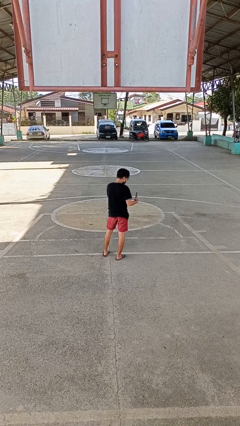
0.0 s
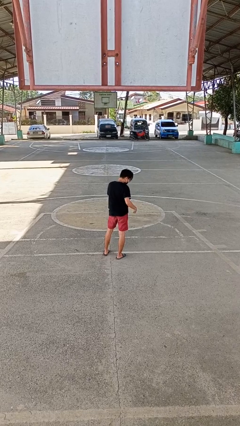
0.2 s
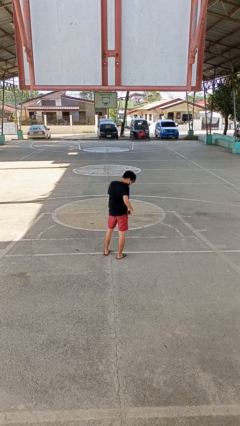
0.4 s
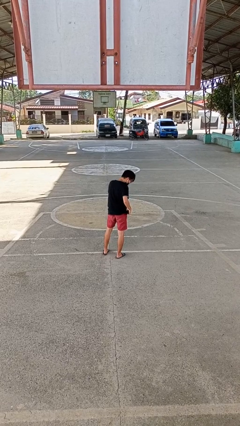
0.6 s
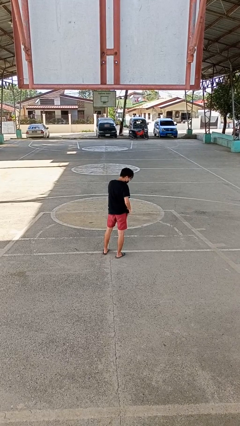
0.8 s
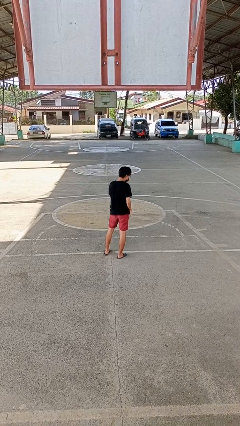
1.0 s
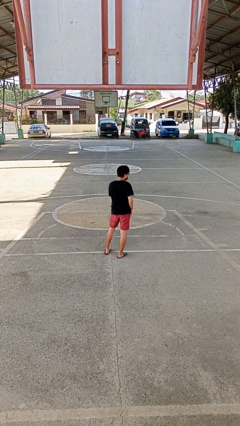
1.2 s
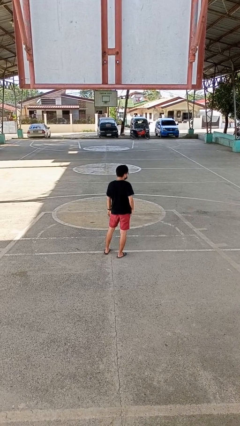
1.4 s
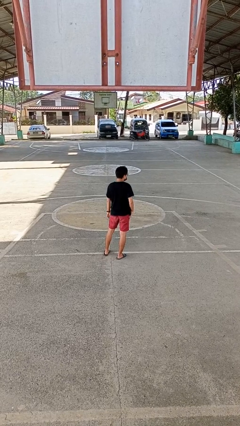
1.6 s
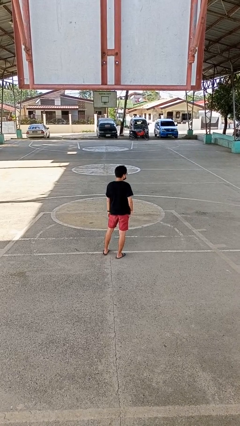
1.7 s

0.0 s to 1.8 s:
person puts phone into pocket

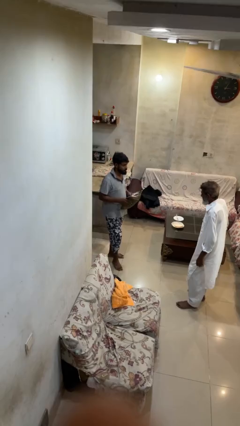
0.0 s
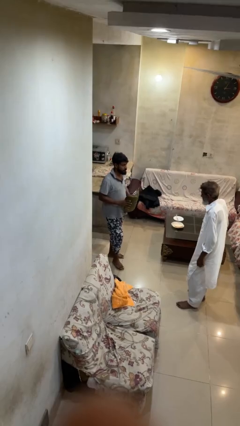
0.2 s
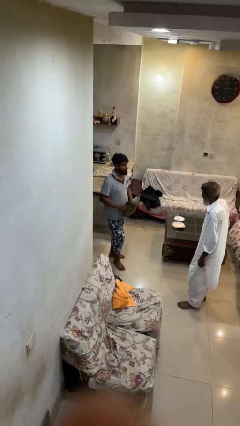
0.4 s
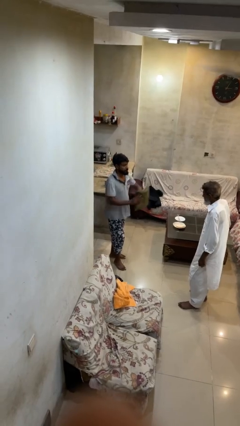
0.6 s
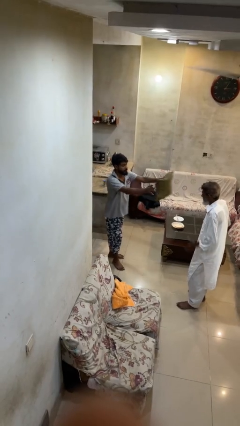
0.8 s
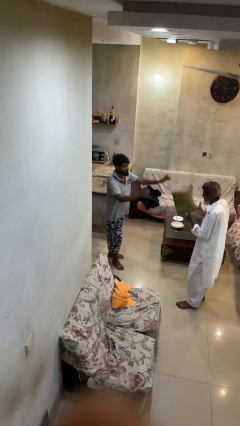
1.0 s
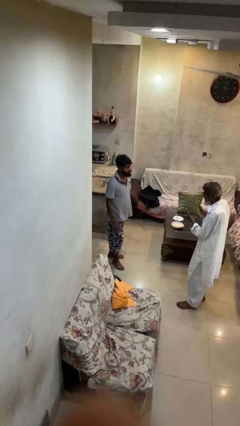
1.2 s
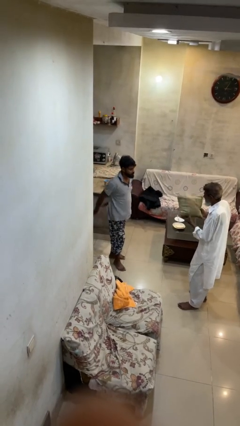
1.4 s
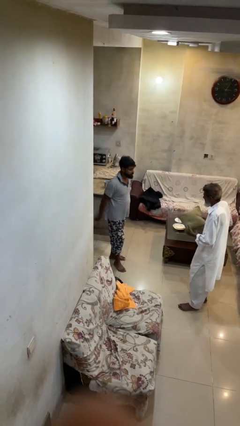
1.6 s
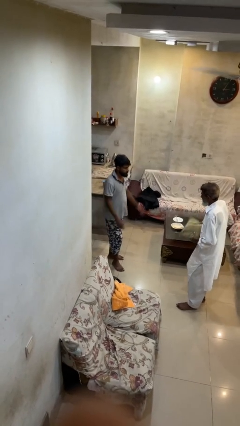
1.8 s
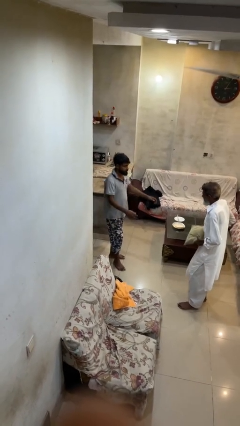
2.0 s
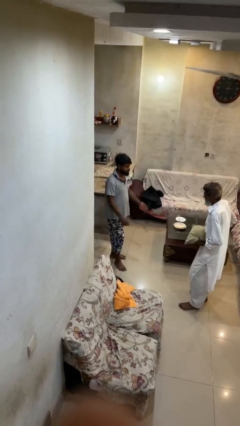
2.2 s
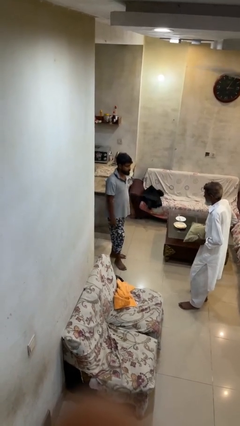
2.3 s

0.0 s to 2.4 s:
person throws object to person

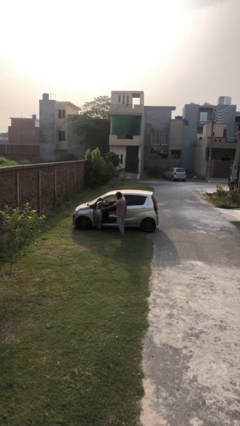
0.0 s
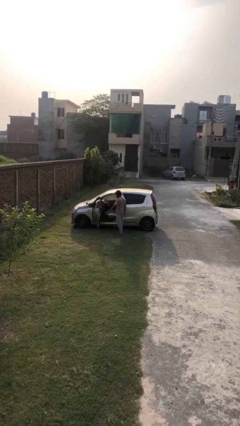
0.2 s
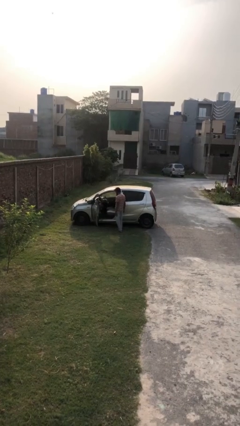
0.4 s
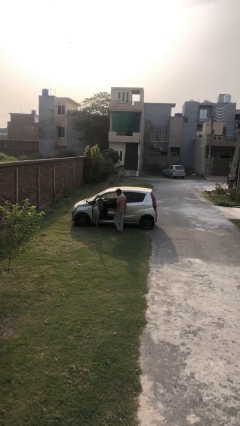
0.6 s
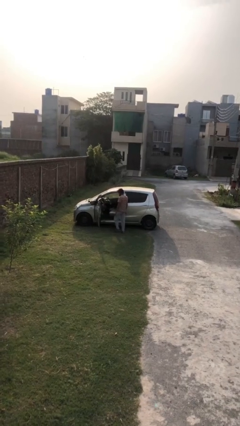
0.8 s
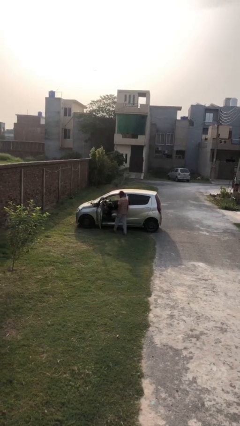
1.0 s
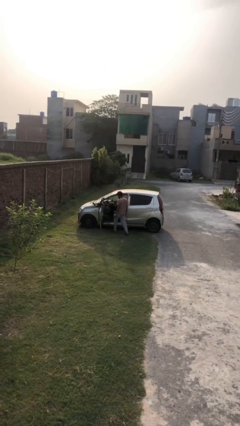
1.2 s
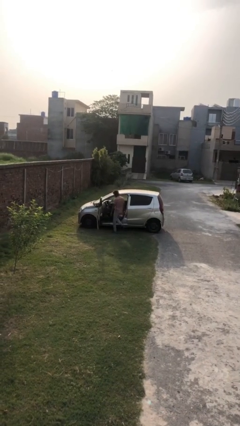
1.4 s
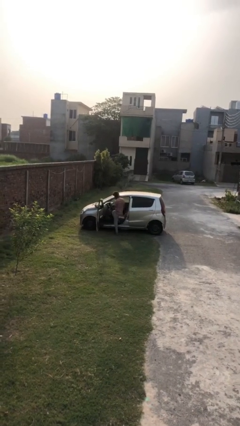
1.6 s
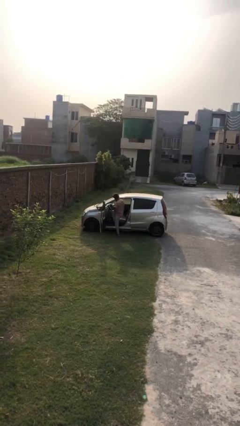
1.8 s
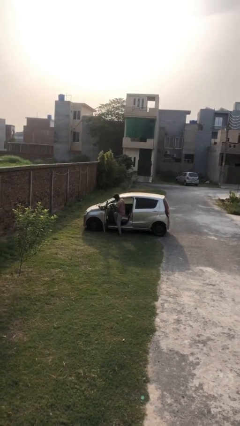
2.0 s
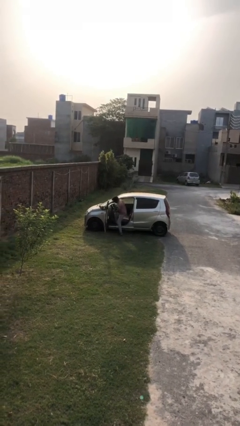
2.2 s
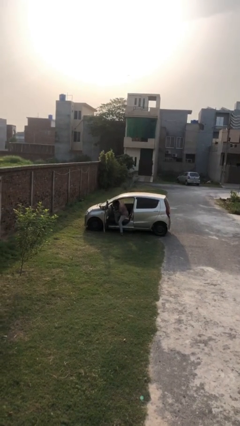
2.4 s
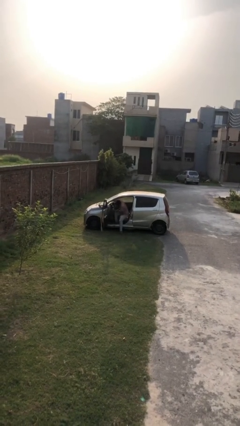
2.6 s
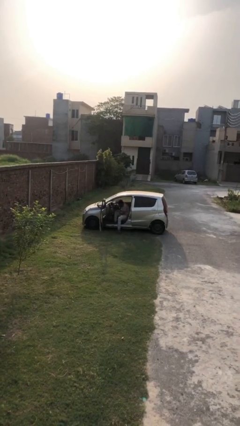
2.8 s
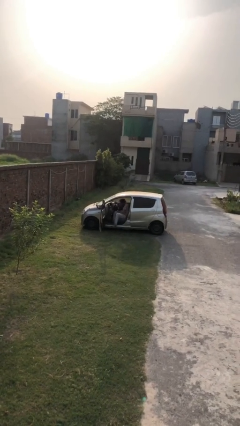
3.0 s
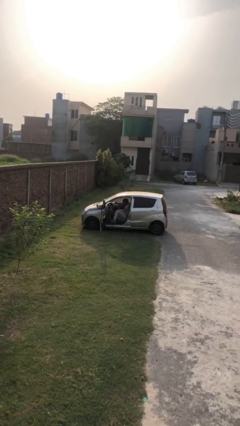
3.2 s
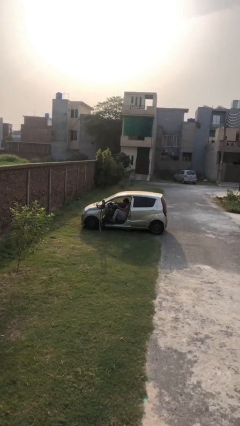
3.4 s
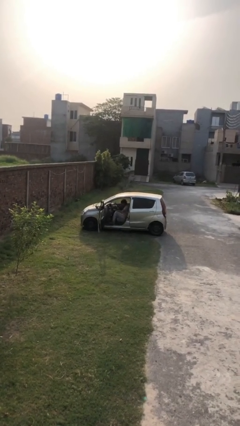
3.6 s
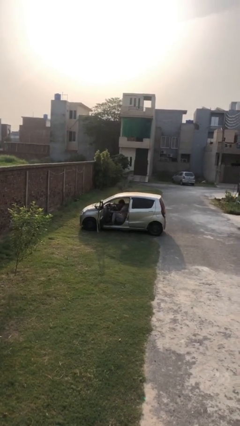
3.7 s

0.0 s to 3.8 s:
person enters car

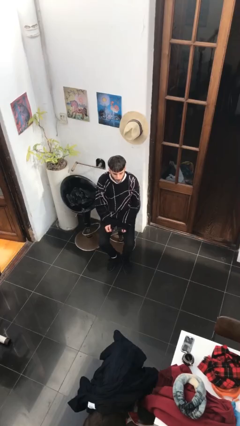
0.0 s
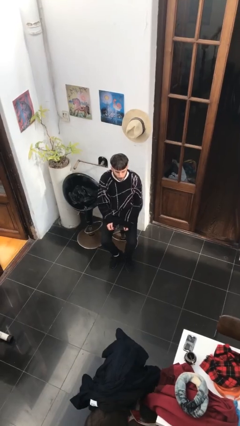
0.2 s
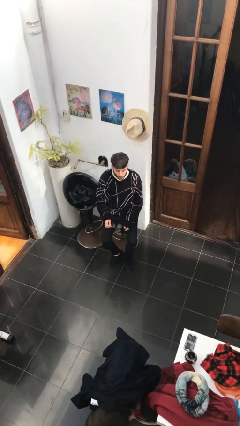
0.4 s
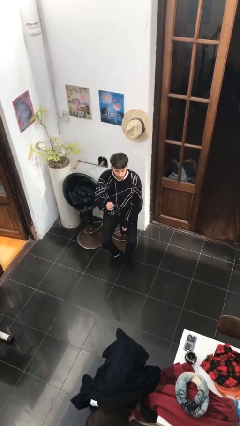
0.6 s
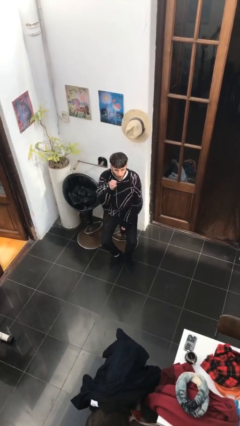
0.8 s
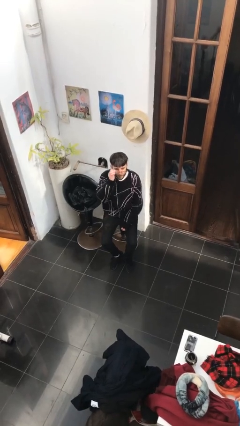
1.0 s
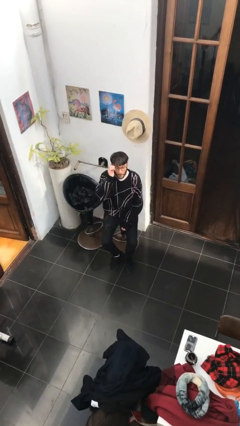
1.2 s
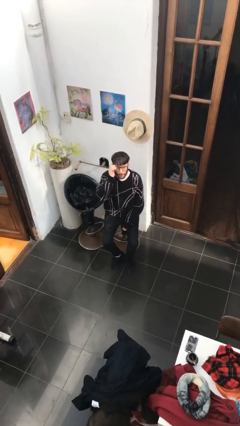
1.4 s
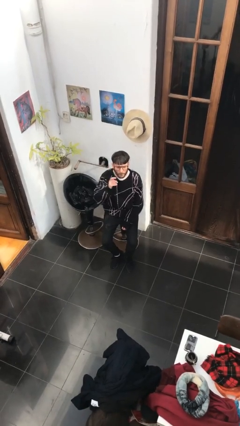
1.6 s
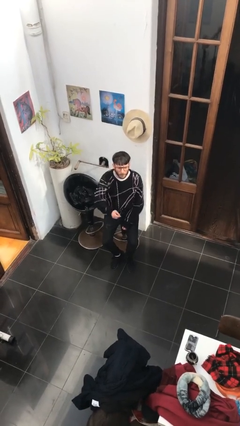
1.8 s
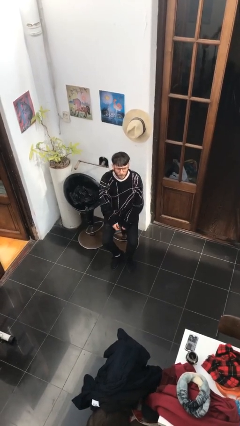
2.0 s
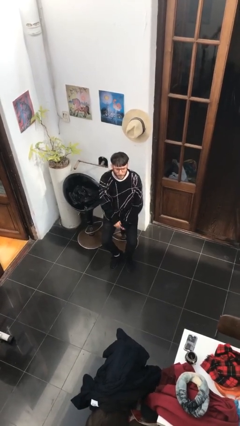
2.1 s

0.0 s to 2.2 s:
person puts on glasses

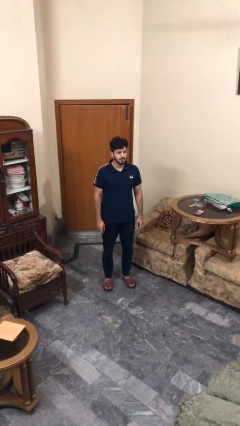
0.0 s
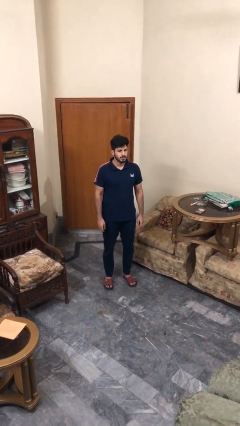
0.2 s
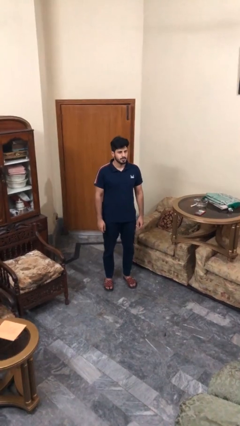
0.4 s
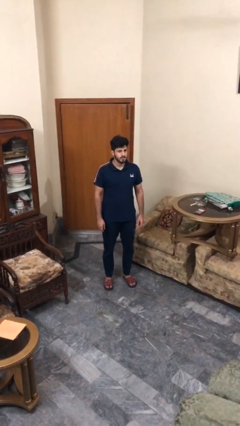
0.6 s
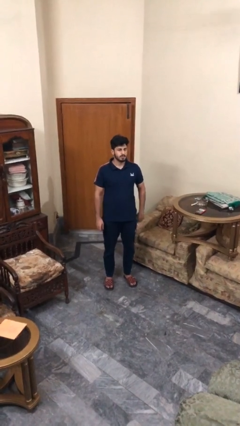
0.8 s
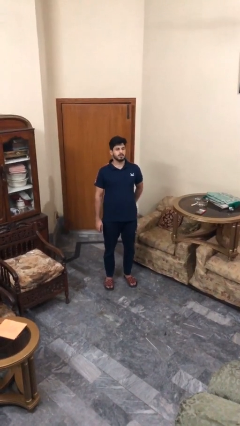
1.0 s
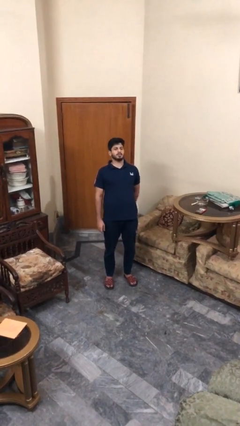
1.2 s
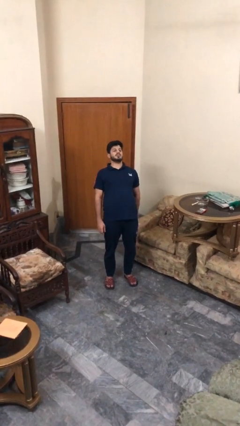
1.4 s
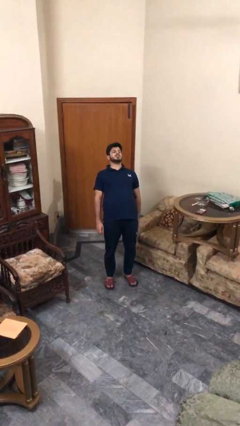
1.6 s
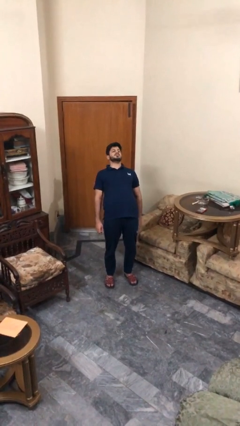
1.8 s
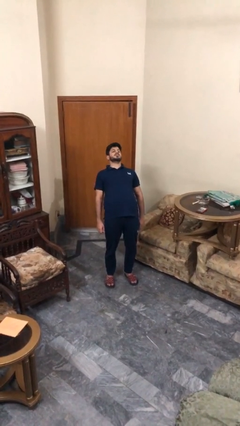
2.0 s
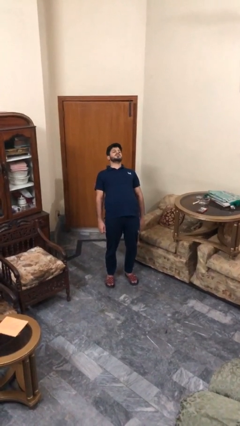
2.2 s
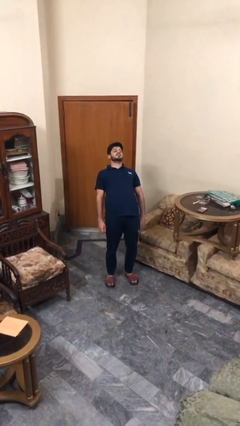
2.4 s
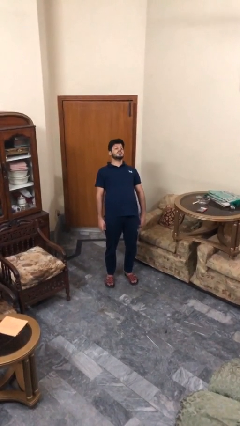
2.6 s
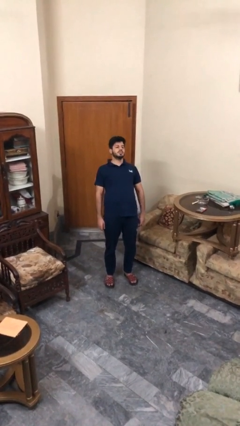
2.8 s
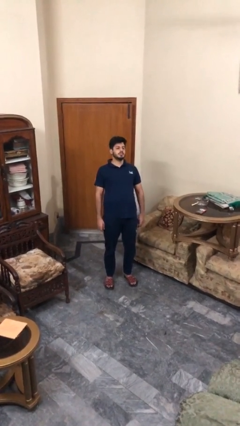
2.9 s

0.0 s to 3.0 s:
person stretches back

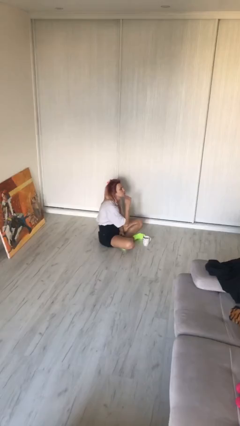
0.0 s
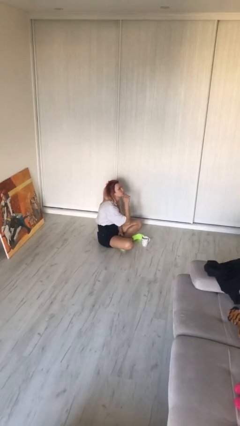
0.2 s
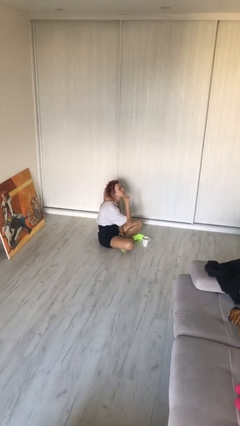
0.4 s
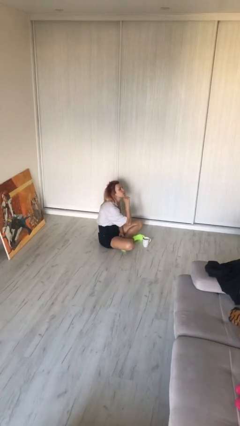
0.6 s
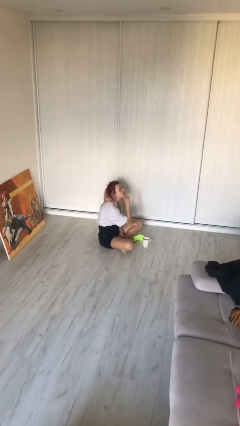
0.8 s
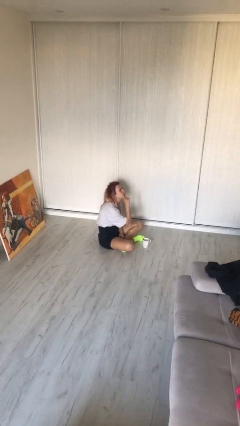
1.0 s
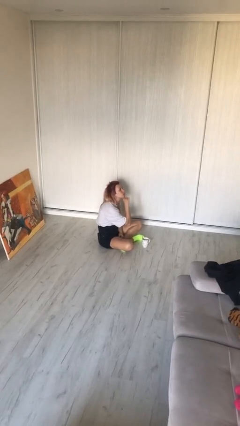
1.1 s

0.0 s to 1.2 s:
person strokes chin

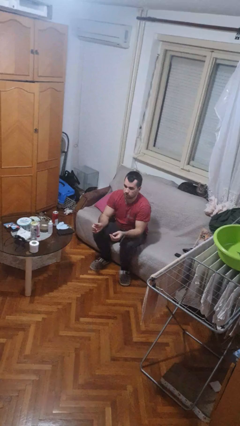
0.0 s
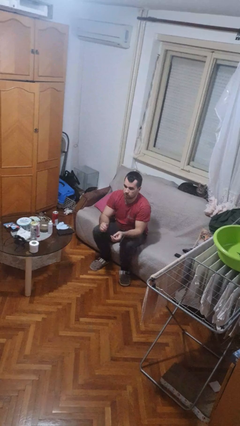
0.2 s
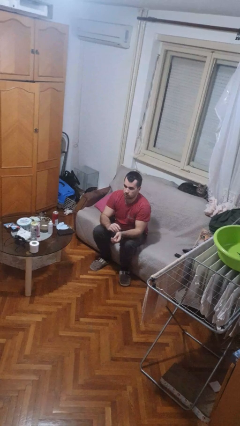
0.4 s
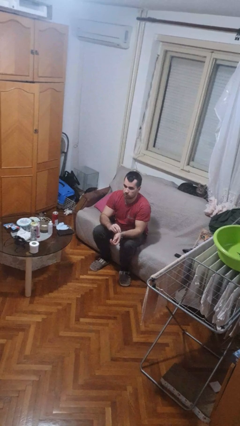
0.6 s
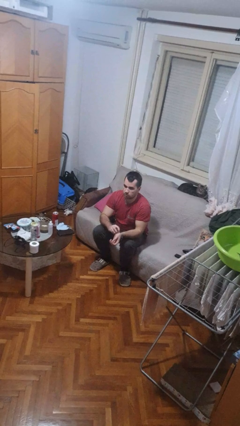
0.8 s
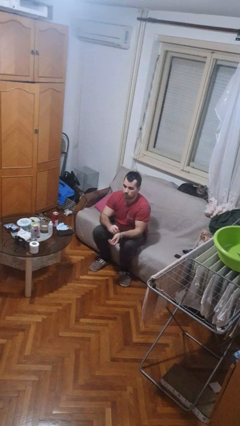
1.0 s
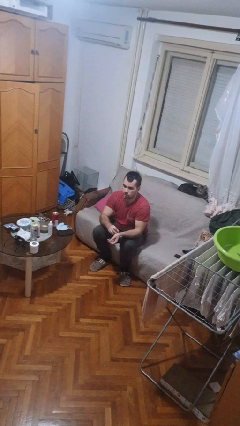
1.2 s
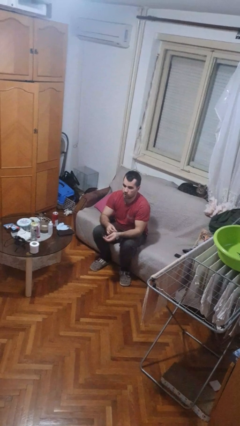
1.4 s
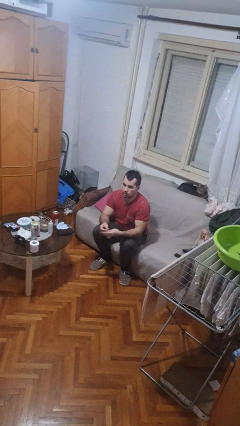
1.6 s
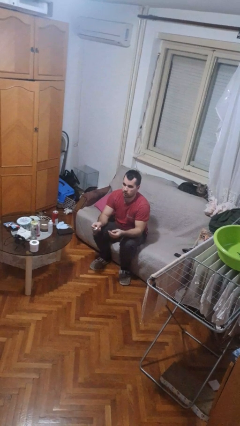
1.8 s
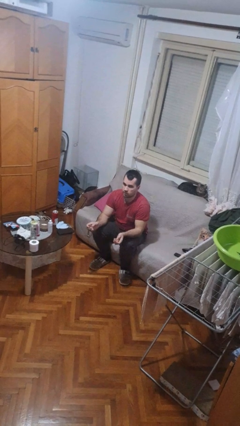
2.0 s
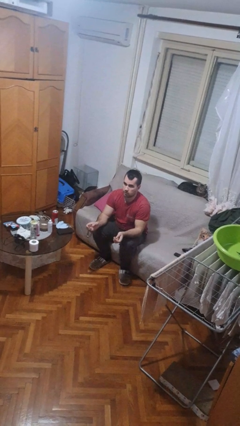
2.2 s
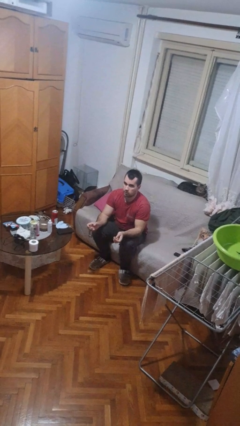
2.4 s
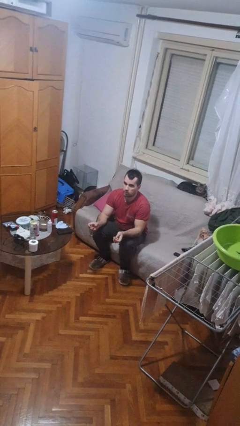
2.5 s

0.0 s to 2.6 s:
person takes off wristwatch

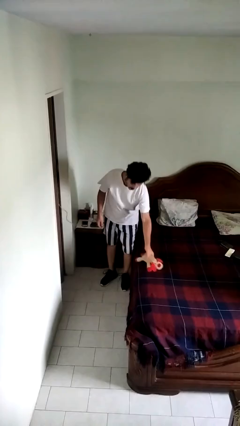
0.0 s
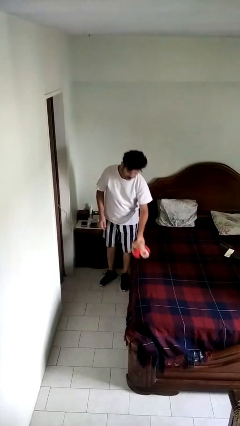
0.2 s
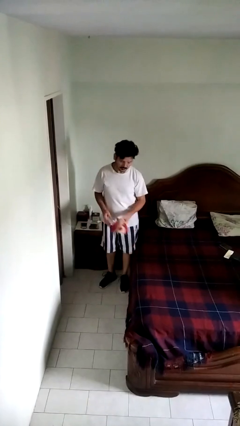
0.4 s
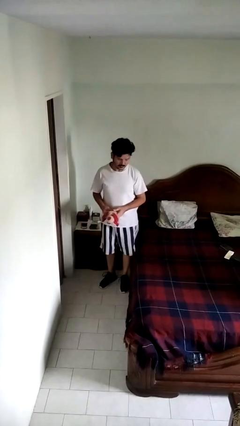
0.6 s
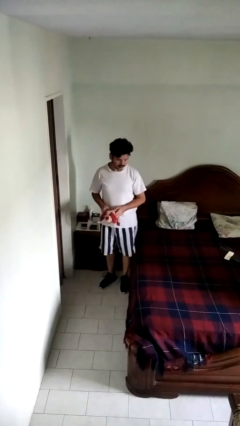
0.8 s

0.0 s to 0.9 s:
person picks up object from bed
